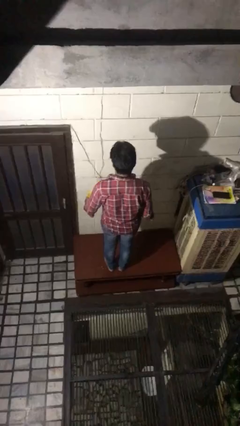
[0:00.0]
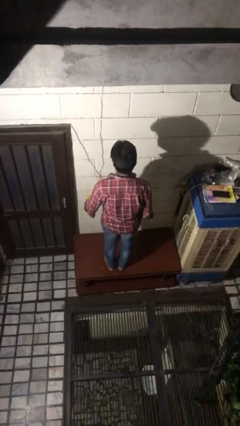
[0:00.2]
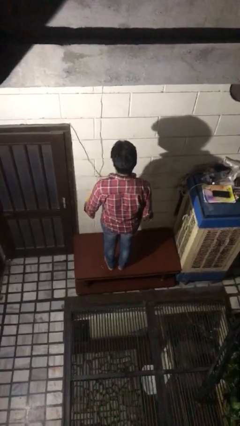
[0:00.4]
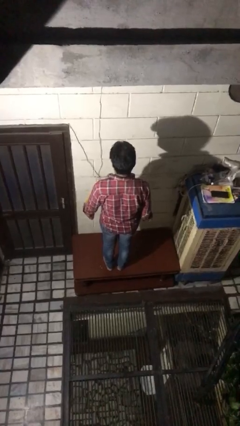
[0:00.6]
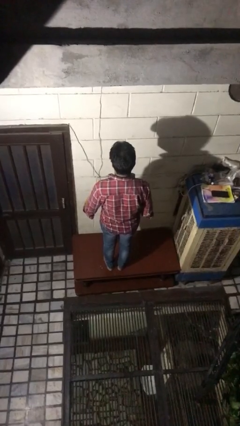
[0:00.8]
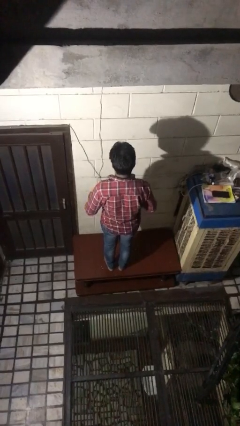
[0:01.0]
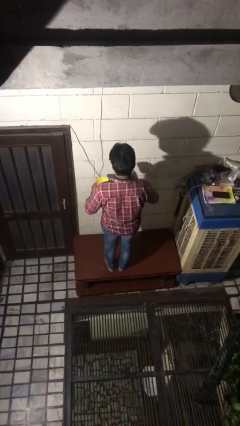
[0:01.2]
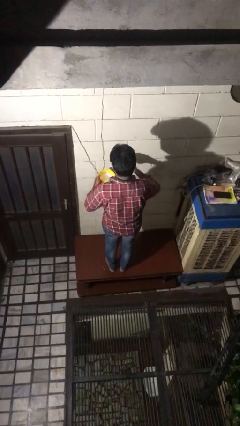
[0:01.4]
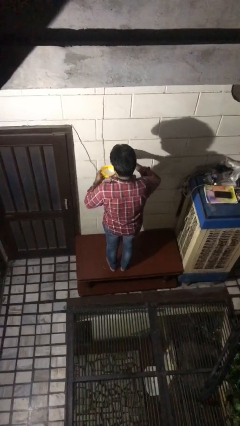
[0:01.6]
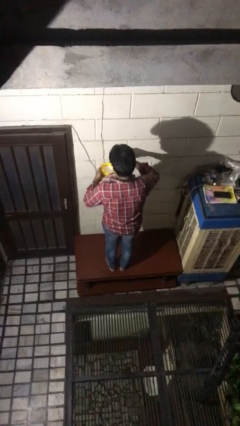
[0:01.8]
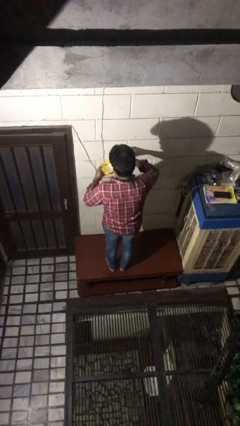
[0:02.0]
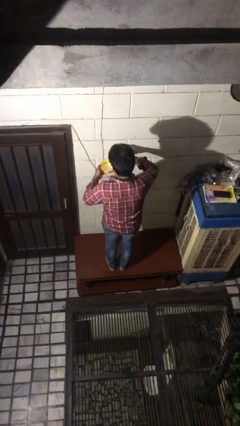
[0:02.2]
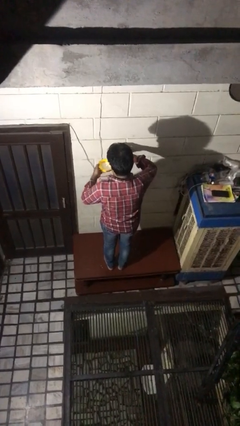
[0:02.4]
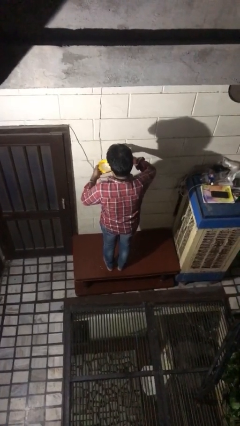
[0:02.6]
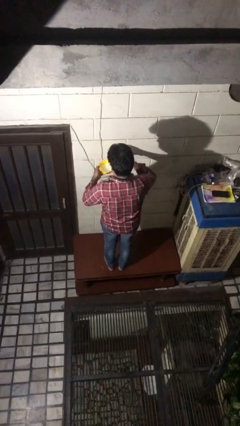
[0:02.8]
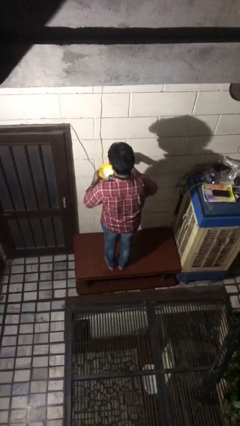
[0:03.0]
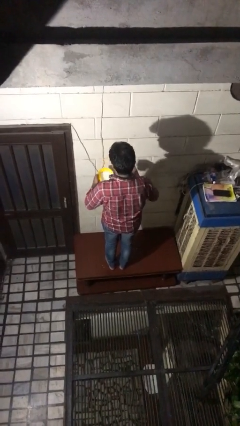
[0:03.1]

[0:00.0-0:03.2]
person pours into bowl

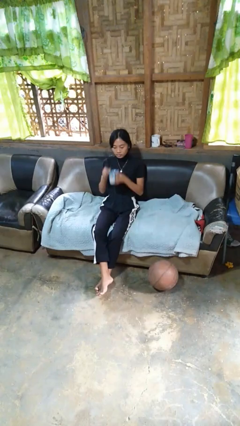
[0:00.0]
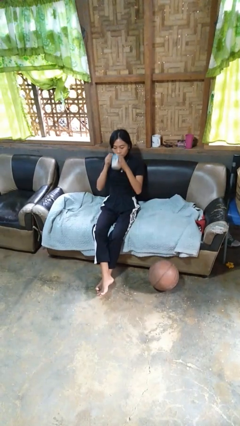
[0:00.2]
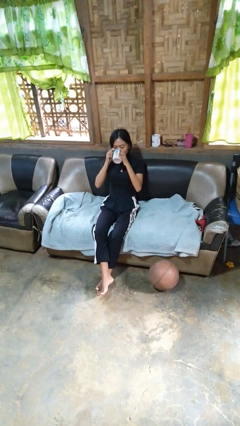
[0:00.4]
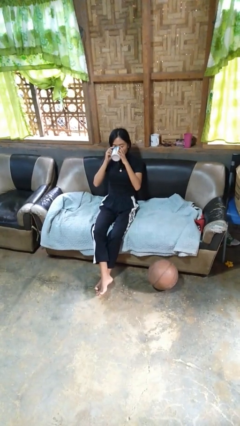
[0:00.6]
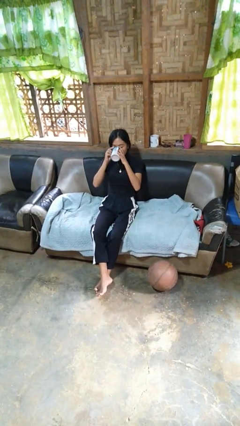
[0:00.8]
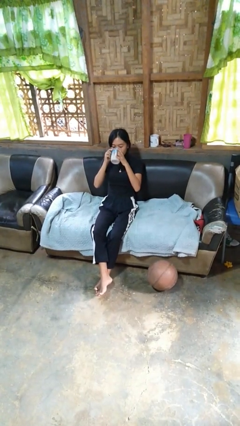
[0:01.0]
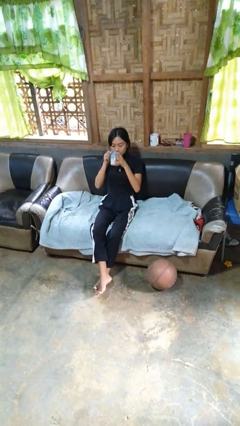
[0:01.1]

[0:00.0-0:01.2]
person drinks from mug

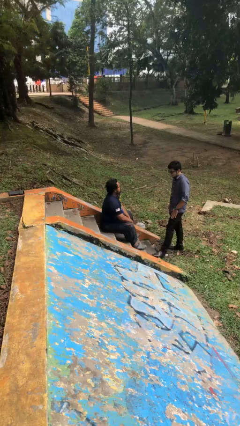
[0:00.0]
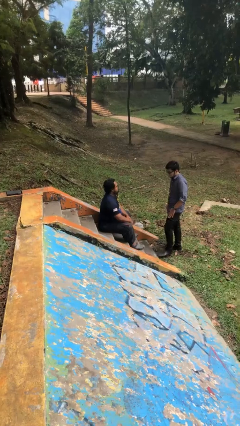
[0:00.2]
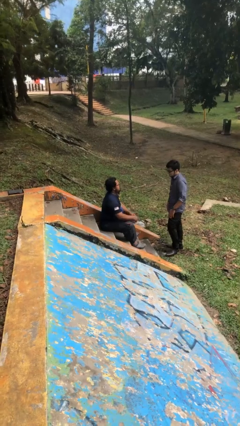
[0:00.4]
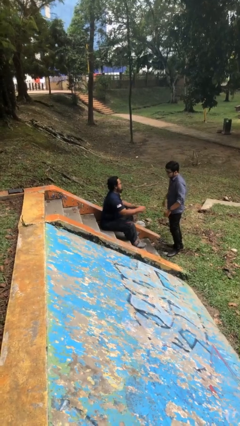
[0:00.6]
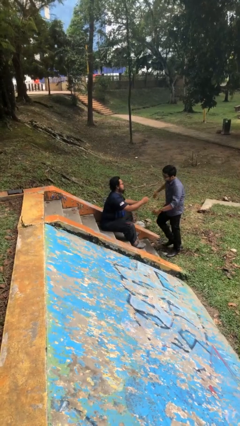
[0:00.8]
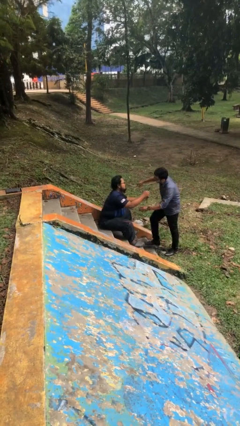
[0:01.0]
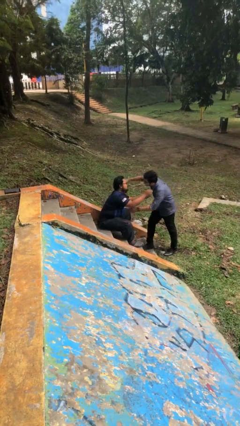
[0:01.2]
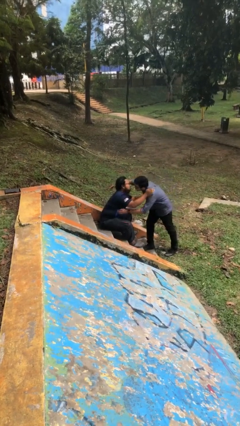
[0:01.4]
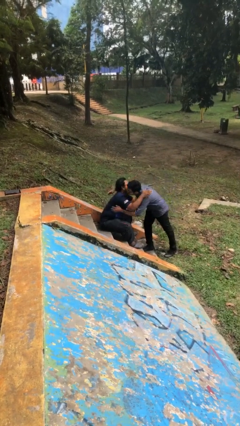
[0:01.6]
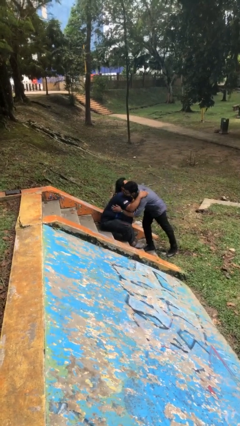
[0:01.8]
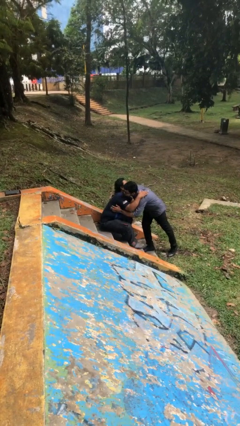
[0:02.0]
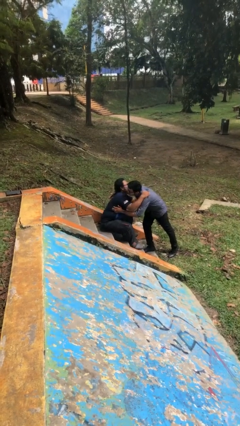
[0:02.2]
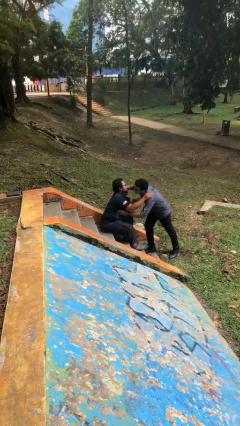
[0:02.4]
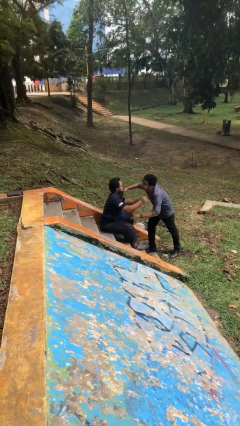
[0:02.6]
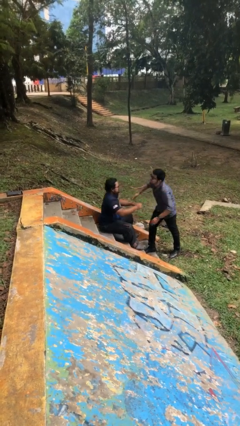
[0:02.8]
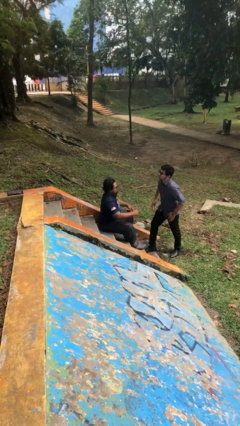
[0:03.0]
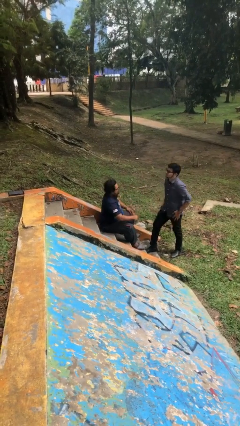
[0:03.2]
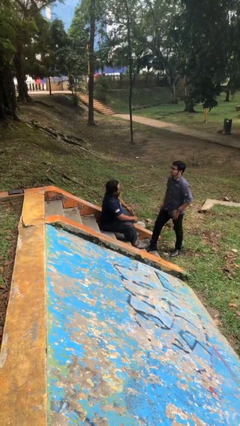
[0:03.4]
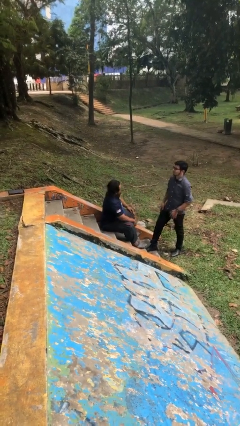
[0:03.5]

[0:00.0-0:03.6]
person embraces person

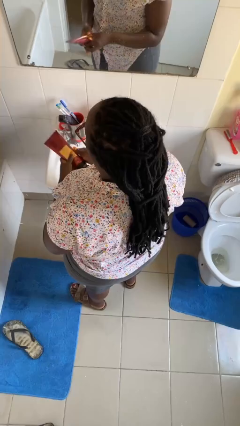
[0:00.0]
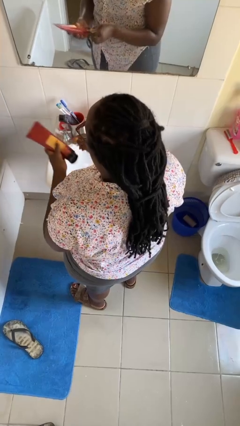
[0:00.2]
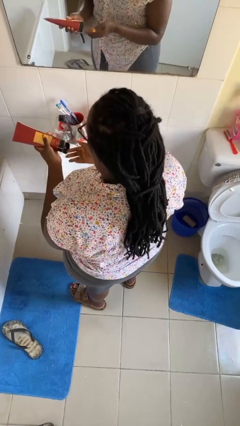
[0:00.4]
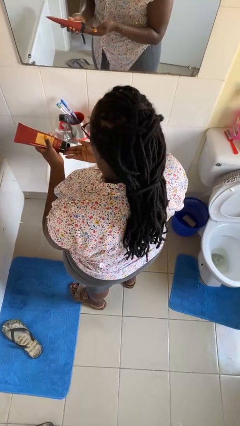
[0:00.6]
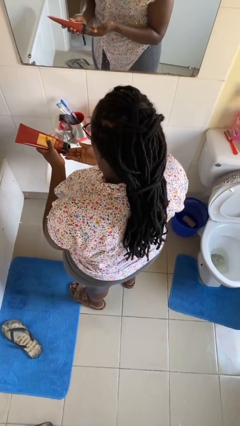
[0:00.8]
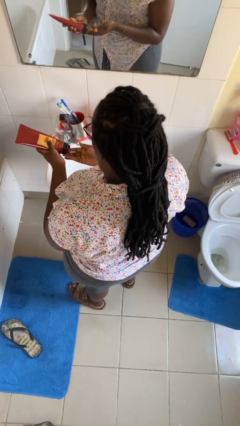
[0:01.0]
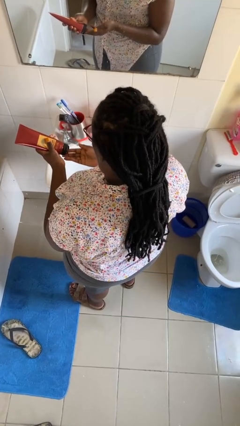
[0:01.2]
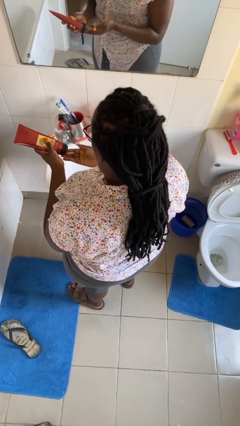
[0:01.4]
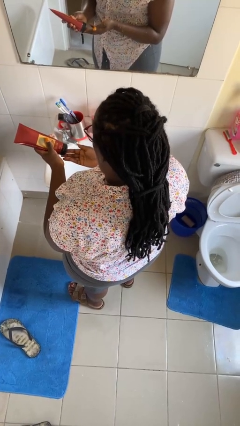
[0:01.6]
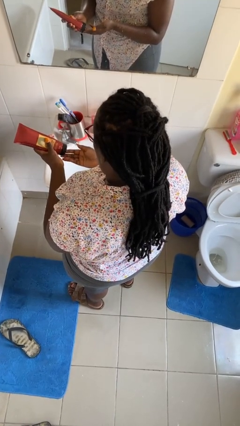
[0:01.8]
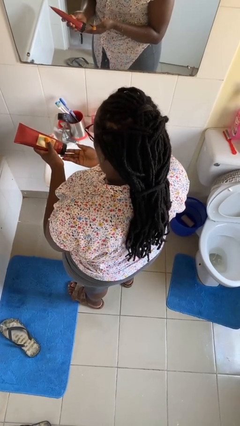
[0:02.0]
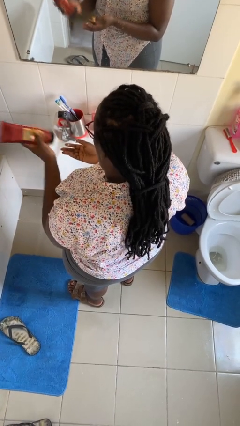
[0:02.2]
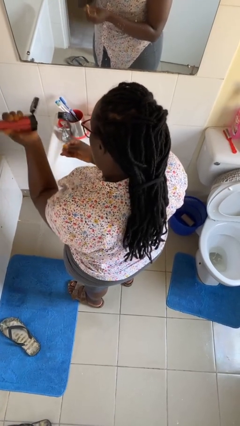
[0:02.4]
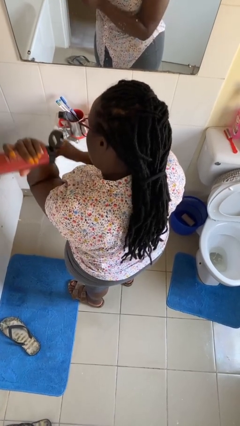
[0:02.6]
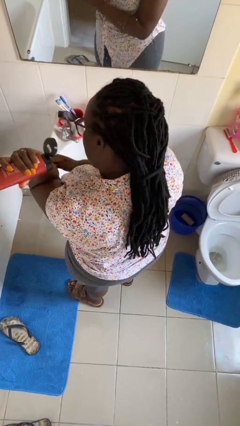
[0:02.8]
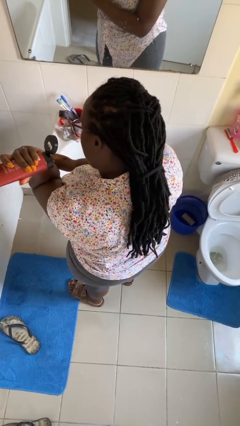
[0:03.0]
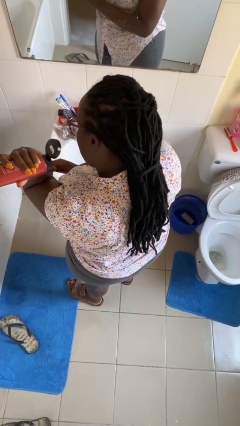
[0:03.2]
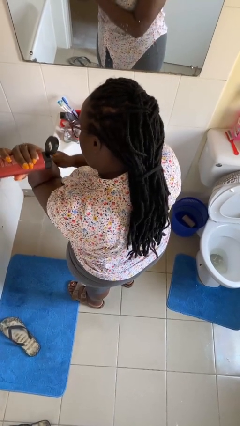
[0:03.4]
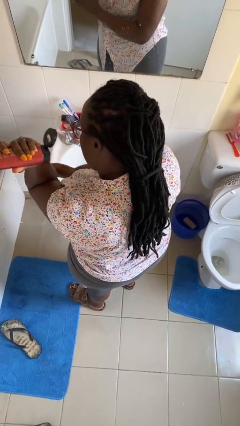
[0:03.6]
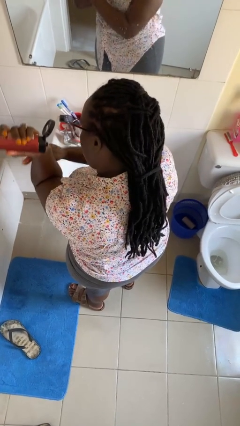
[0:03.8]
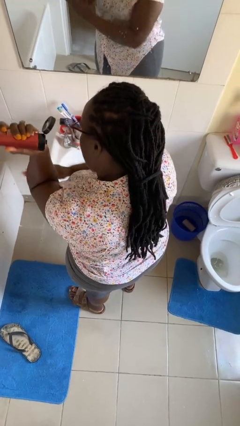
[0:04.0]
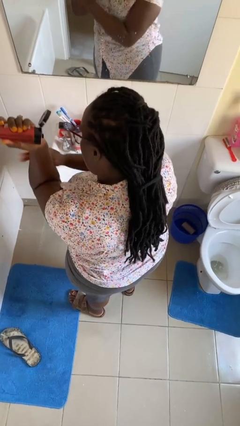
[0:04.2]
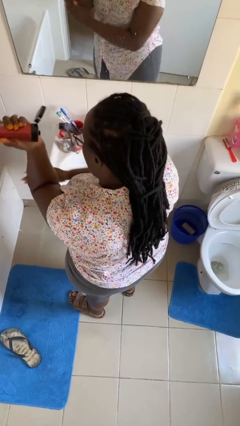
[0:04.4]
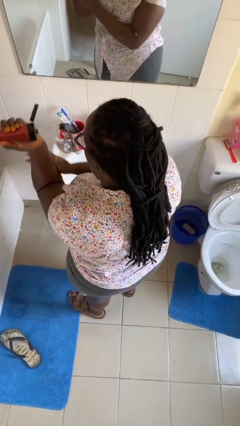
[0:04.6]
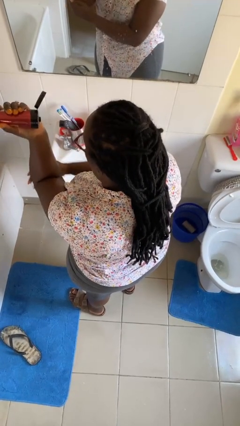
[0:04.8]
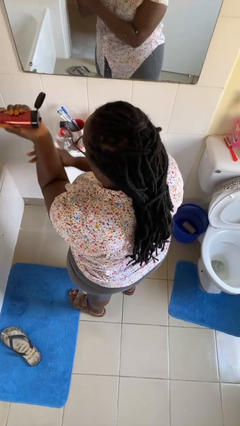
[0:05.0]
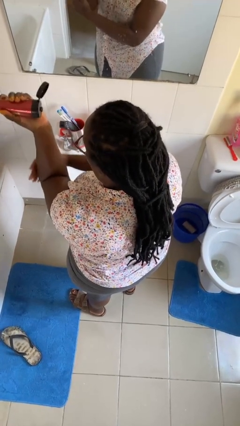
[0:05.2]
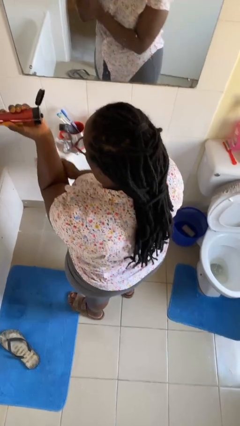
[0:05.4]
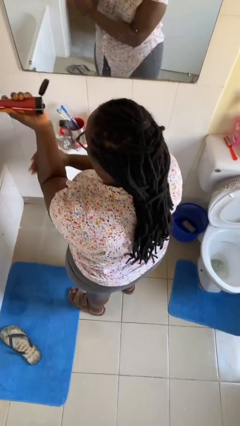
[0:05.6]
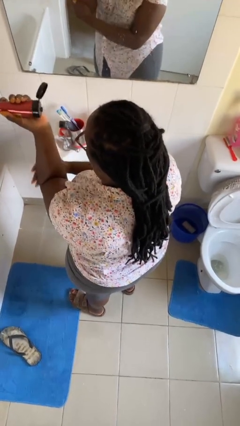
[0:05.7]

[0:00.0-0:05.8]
person applies sunscreen

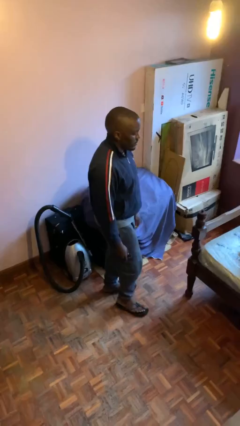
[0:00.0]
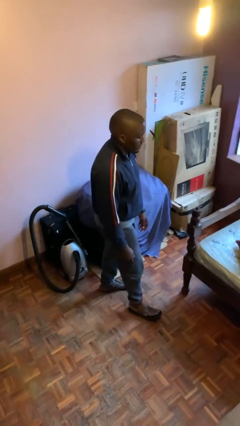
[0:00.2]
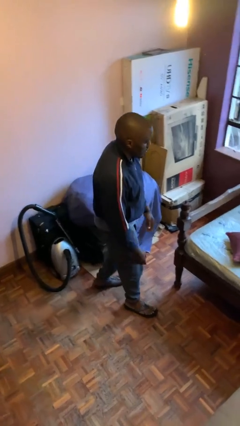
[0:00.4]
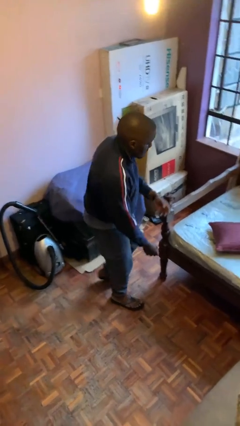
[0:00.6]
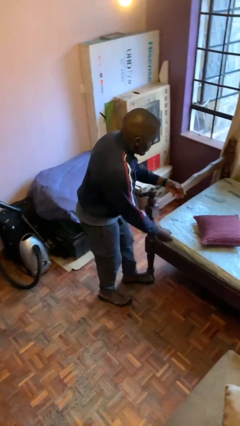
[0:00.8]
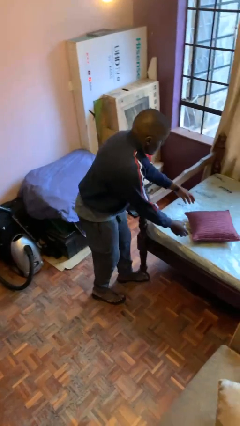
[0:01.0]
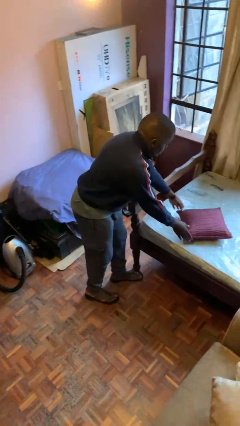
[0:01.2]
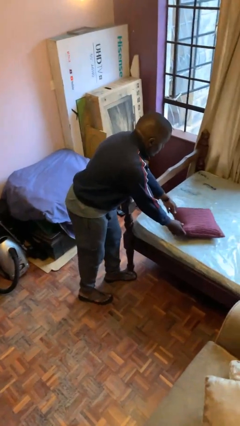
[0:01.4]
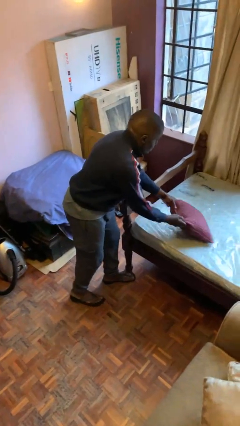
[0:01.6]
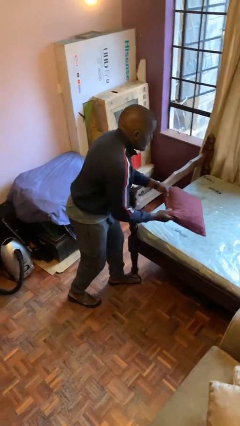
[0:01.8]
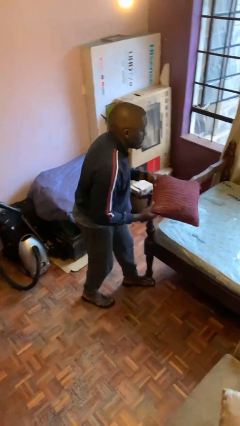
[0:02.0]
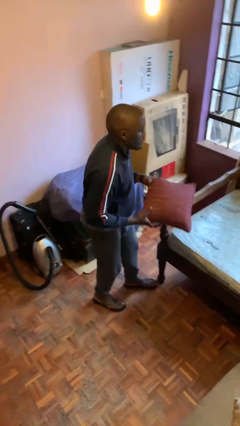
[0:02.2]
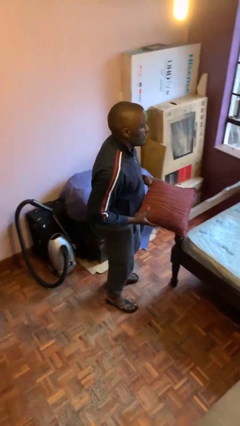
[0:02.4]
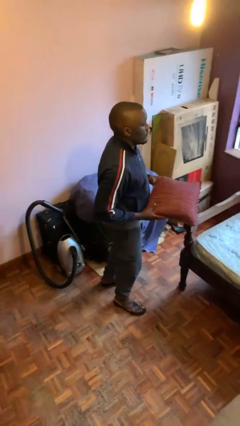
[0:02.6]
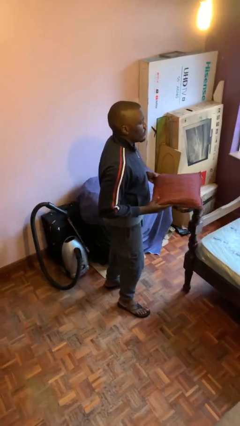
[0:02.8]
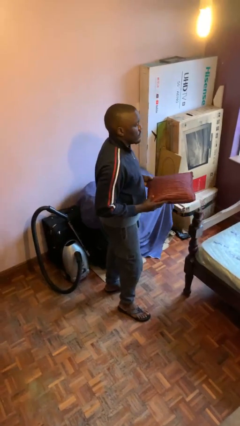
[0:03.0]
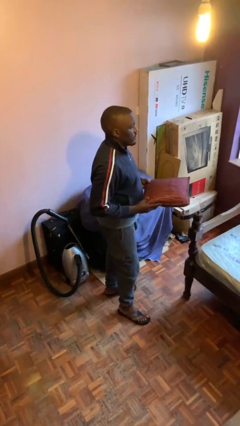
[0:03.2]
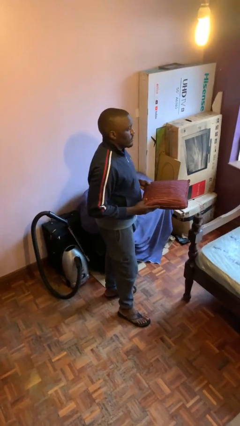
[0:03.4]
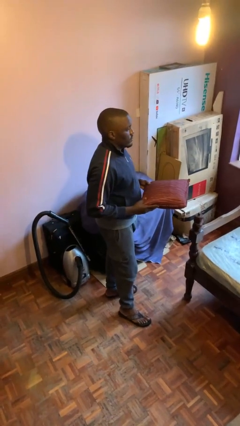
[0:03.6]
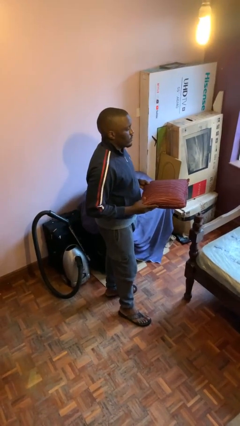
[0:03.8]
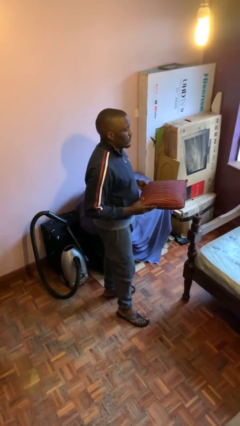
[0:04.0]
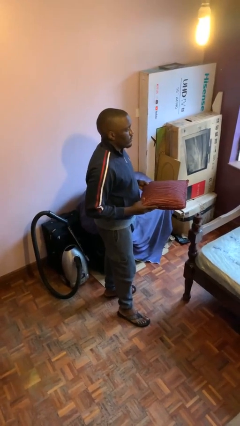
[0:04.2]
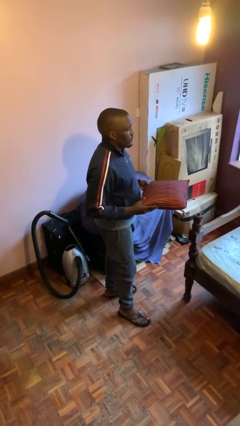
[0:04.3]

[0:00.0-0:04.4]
person picks up object from bed
